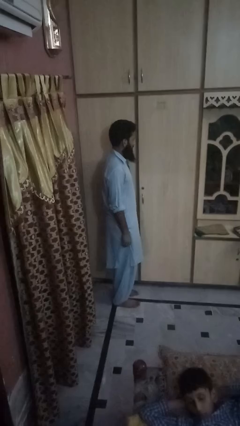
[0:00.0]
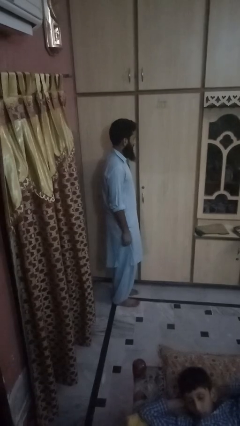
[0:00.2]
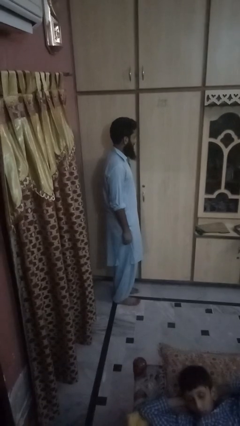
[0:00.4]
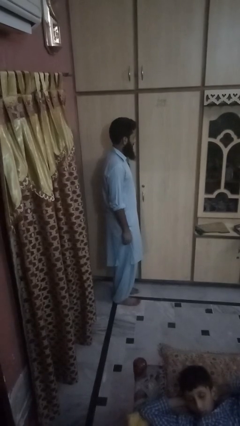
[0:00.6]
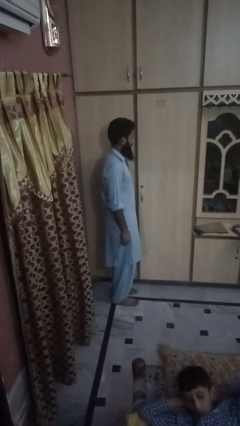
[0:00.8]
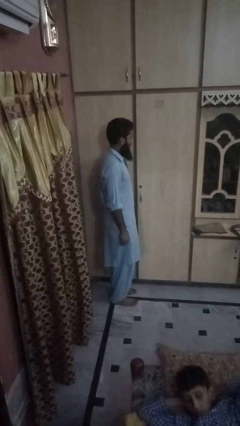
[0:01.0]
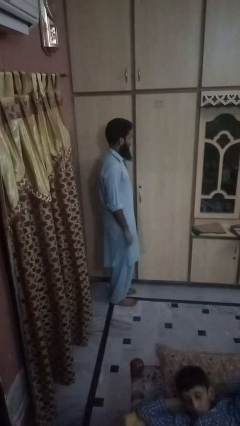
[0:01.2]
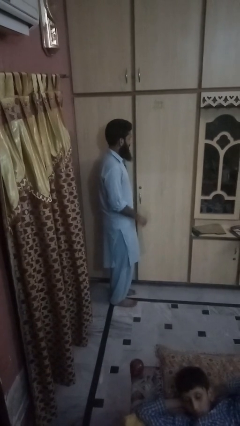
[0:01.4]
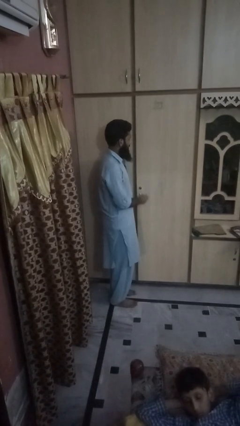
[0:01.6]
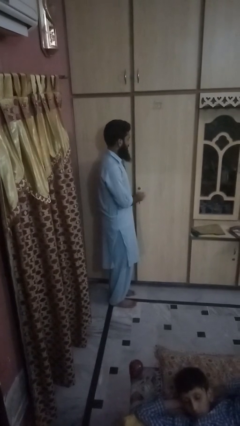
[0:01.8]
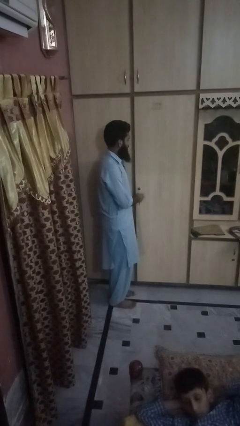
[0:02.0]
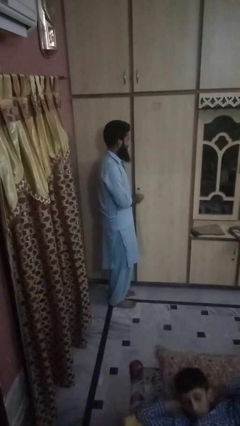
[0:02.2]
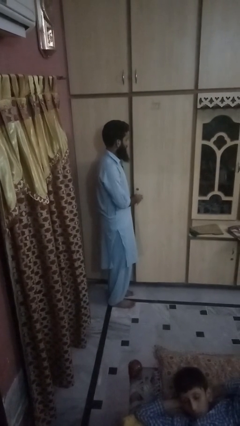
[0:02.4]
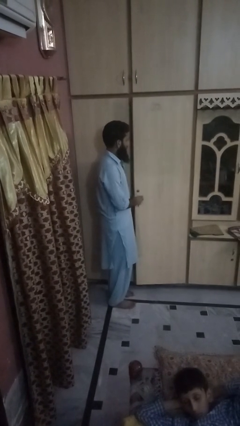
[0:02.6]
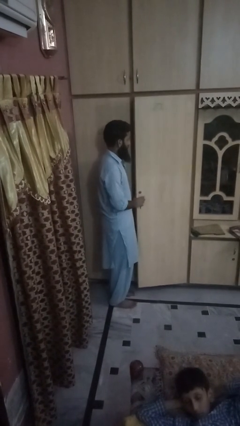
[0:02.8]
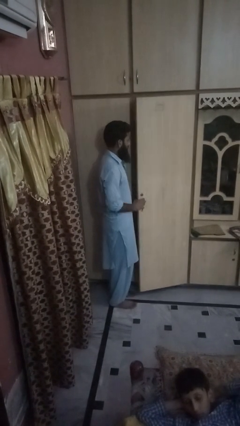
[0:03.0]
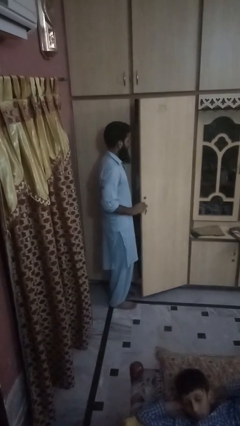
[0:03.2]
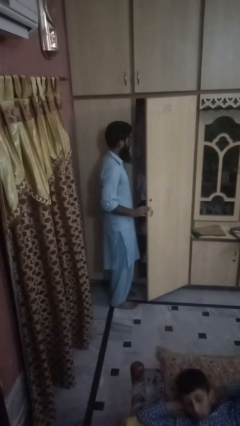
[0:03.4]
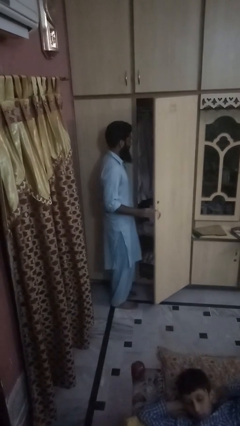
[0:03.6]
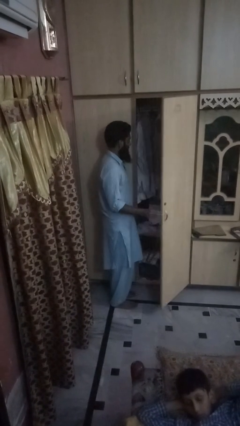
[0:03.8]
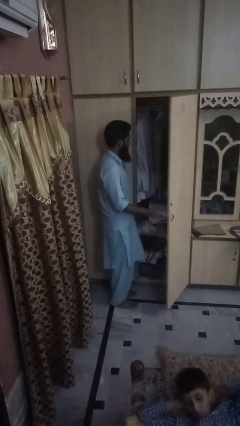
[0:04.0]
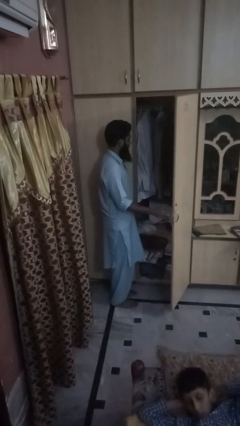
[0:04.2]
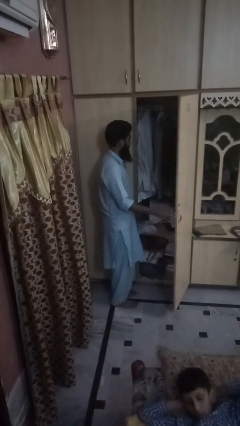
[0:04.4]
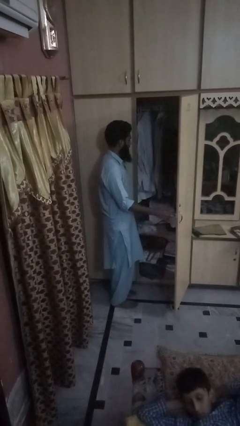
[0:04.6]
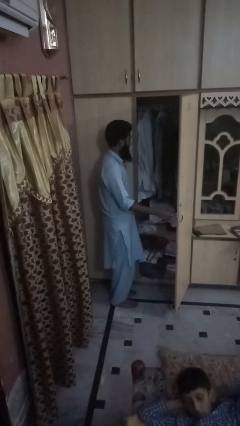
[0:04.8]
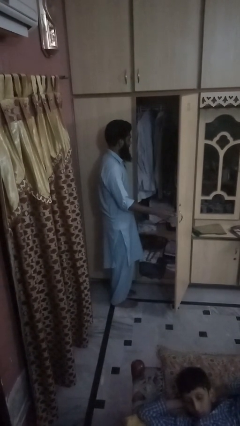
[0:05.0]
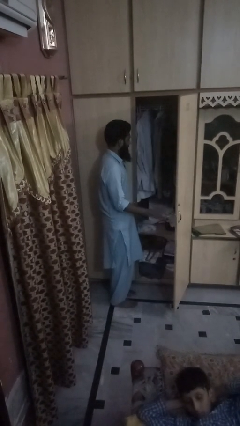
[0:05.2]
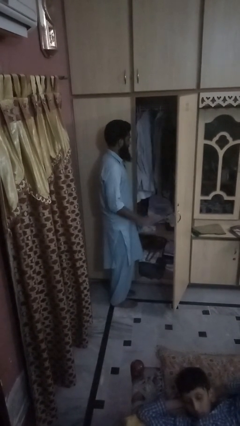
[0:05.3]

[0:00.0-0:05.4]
person opens dresser drawer

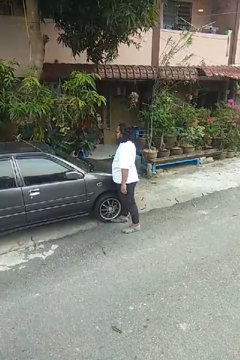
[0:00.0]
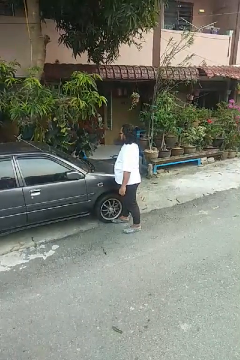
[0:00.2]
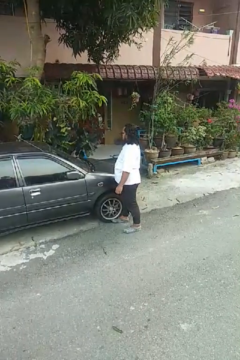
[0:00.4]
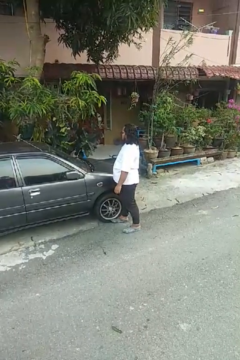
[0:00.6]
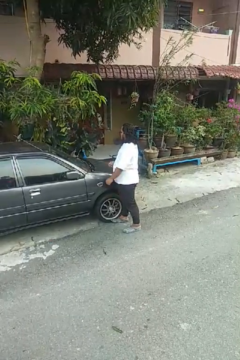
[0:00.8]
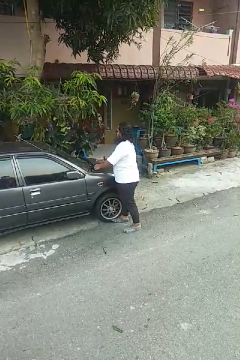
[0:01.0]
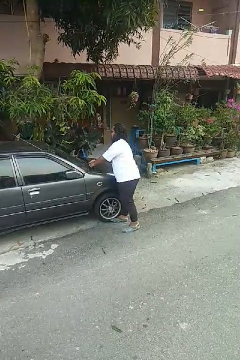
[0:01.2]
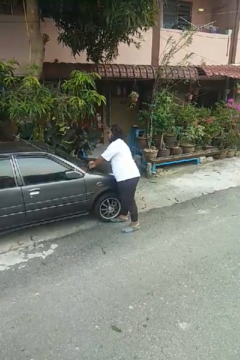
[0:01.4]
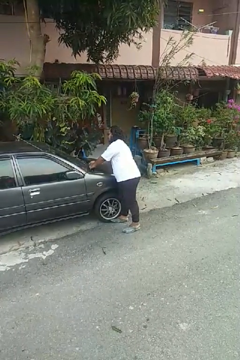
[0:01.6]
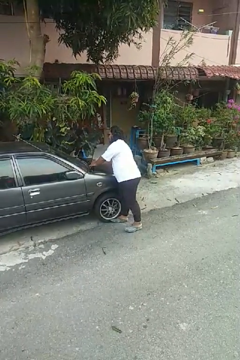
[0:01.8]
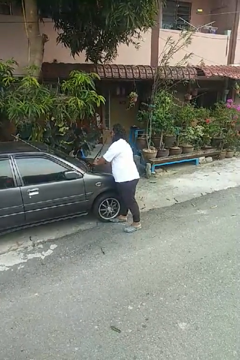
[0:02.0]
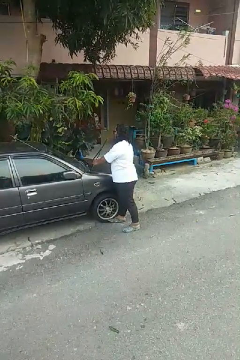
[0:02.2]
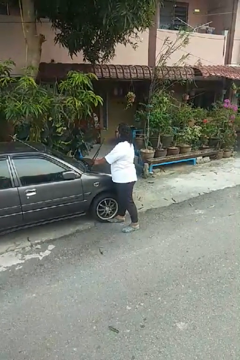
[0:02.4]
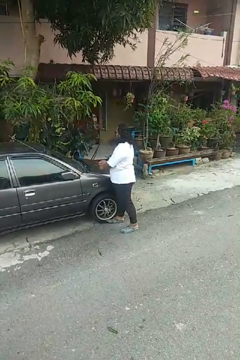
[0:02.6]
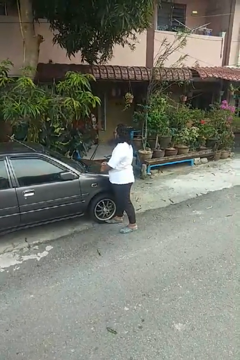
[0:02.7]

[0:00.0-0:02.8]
person flips up car wipers

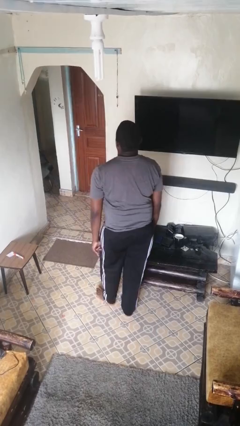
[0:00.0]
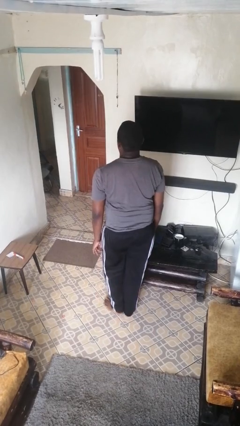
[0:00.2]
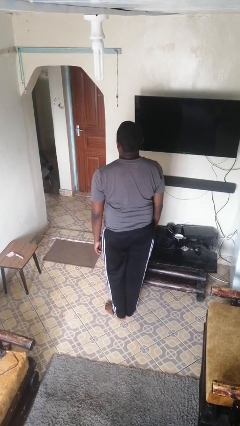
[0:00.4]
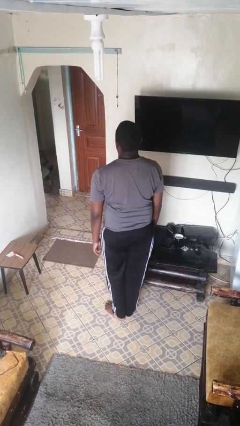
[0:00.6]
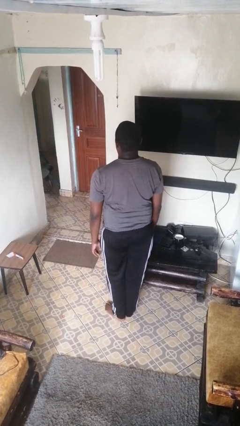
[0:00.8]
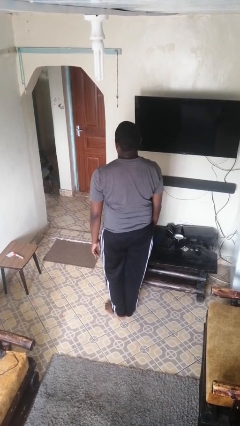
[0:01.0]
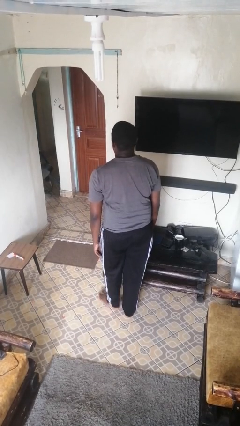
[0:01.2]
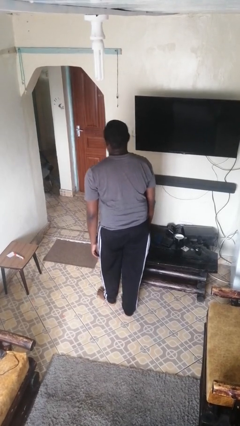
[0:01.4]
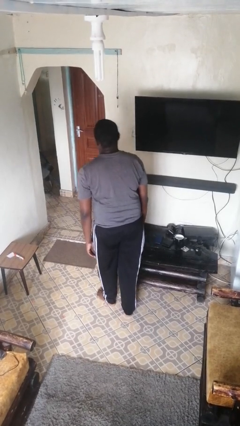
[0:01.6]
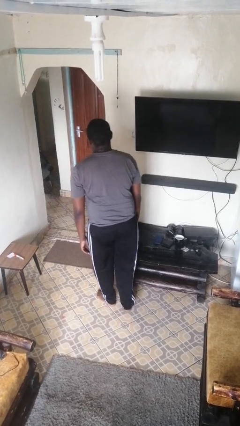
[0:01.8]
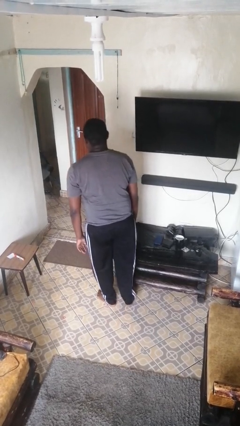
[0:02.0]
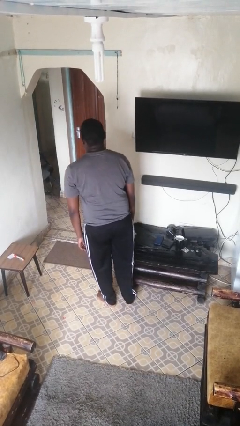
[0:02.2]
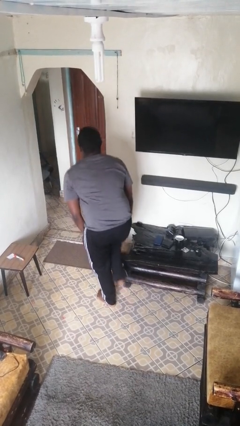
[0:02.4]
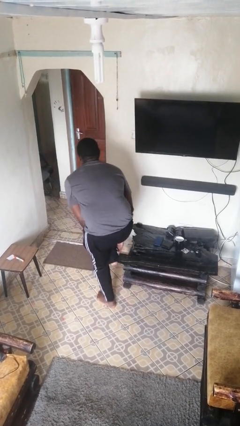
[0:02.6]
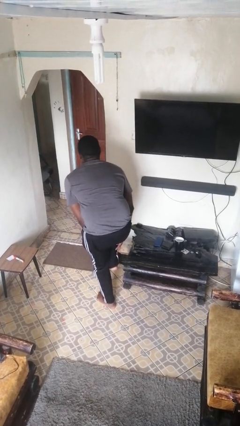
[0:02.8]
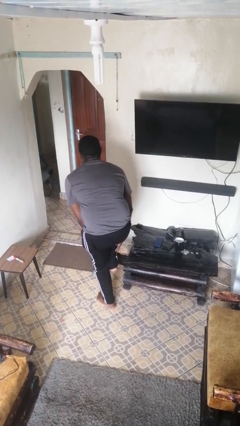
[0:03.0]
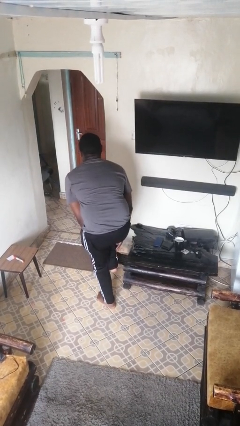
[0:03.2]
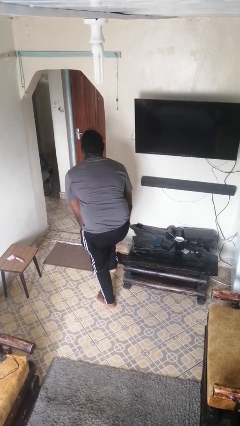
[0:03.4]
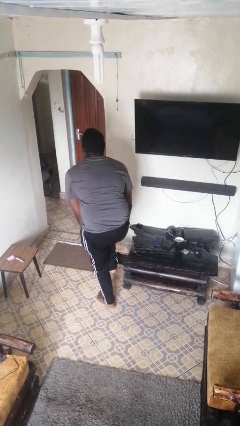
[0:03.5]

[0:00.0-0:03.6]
person bumps into table

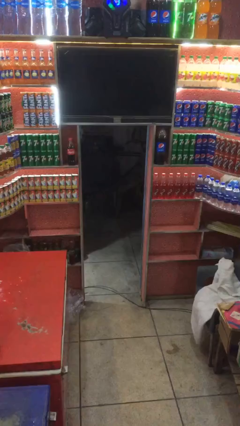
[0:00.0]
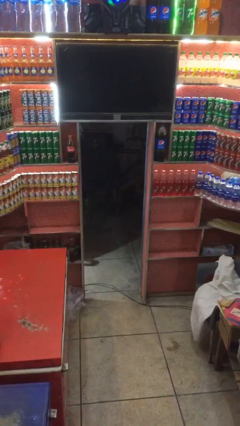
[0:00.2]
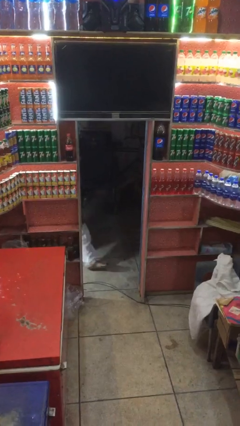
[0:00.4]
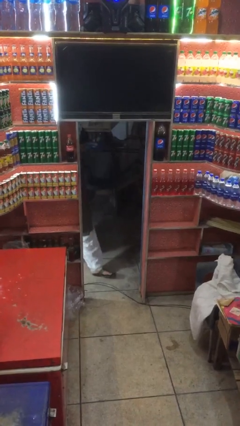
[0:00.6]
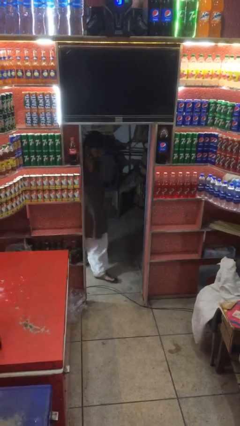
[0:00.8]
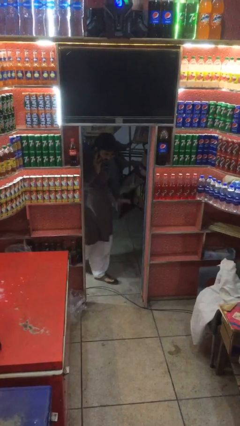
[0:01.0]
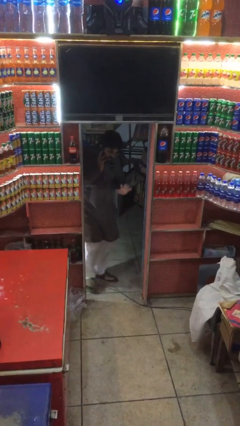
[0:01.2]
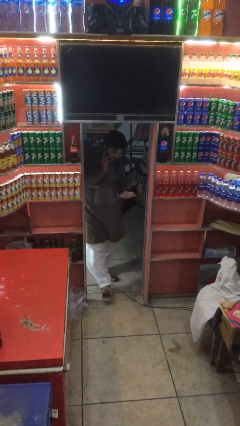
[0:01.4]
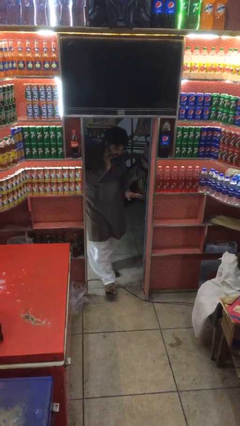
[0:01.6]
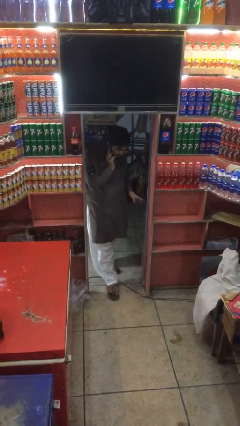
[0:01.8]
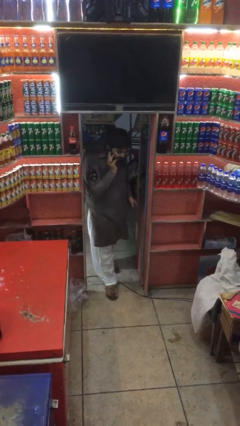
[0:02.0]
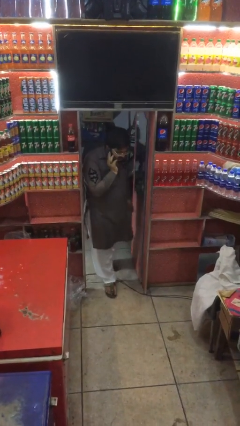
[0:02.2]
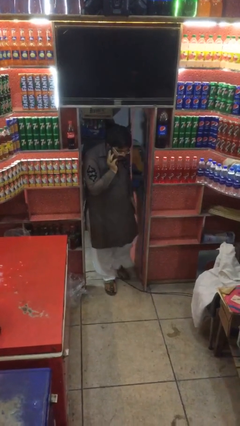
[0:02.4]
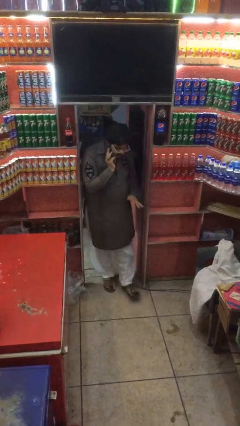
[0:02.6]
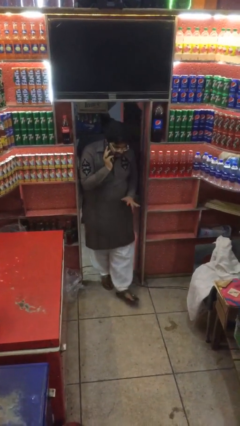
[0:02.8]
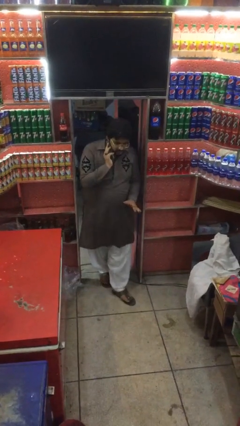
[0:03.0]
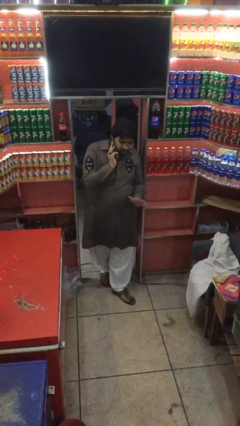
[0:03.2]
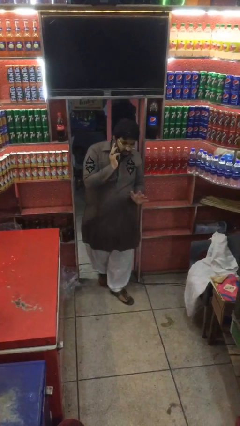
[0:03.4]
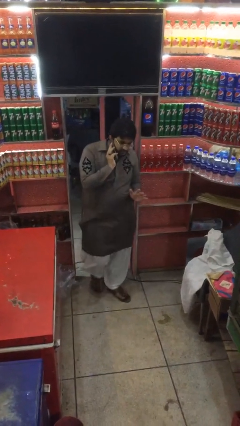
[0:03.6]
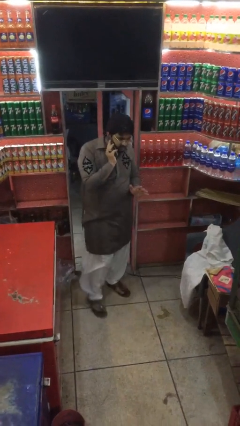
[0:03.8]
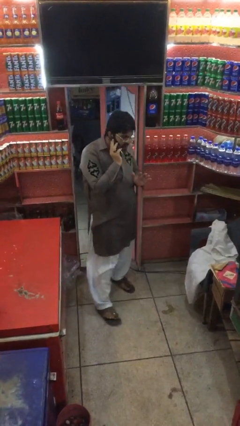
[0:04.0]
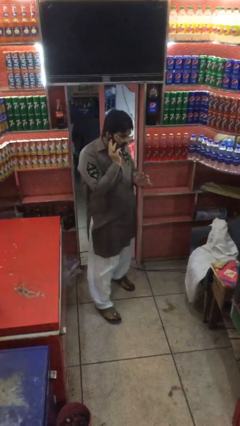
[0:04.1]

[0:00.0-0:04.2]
person enters scene through structure

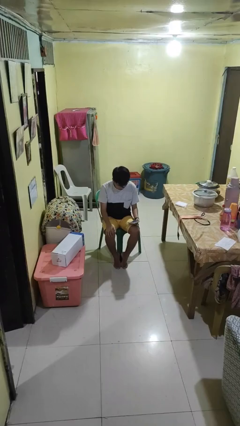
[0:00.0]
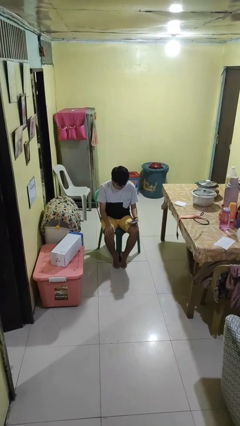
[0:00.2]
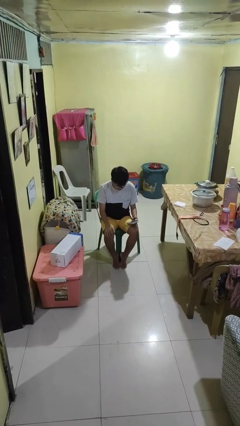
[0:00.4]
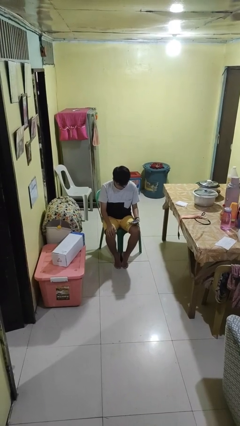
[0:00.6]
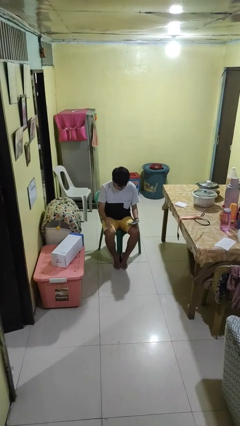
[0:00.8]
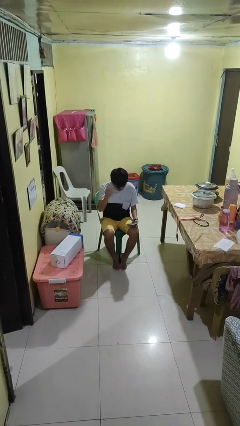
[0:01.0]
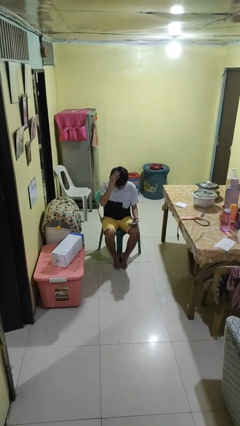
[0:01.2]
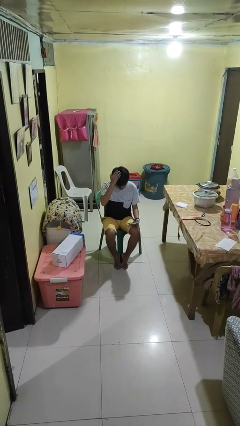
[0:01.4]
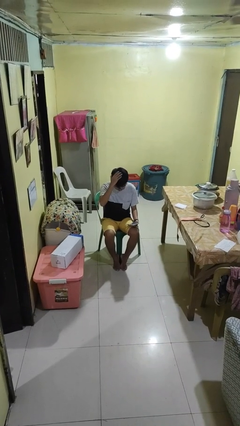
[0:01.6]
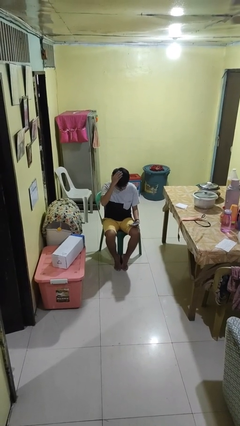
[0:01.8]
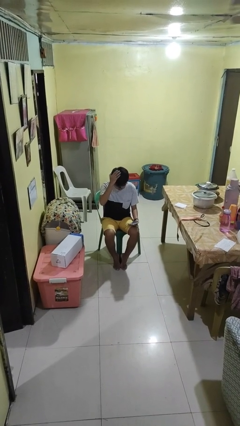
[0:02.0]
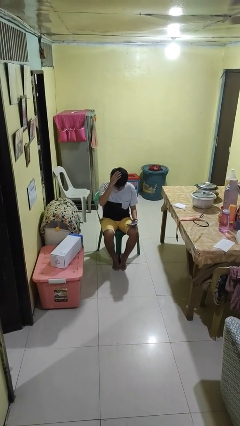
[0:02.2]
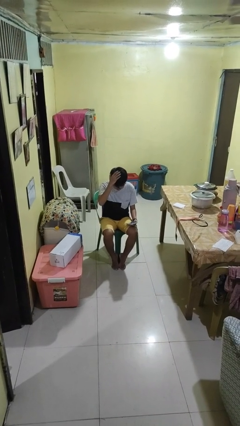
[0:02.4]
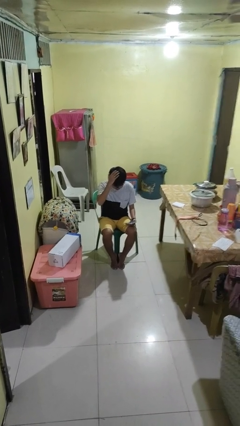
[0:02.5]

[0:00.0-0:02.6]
person pats head
